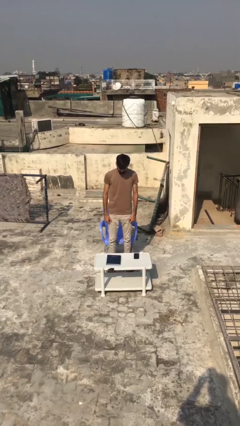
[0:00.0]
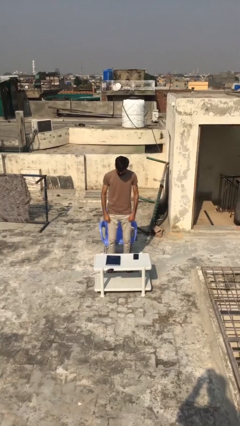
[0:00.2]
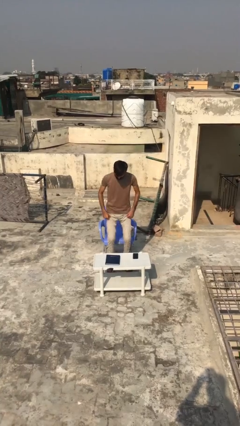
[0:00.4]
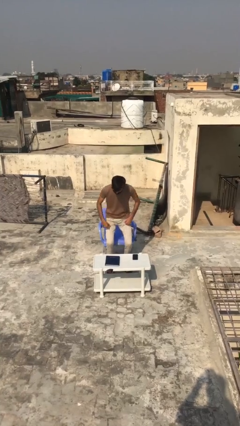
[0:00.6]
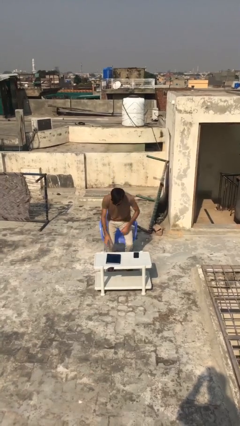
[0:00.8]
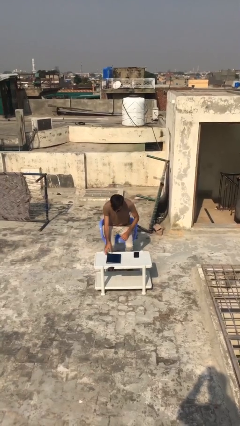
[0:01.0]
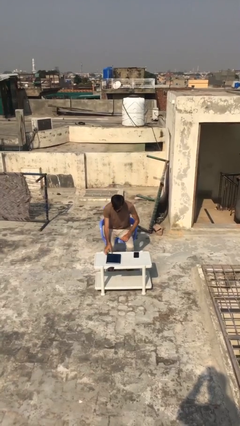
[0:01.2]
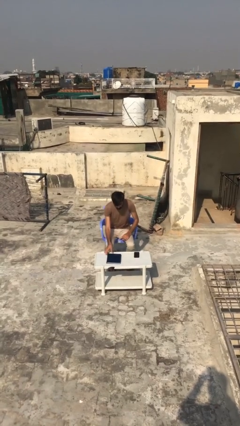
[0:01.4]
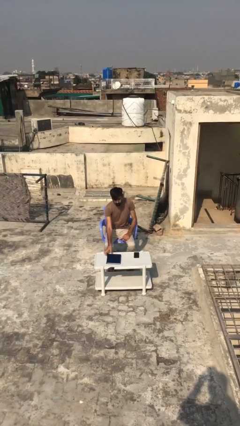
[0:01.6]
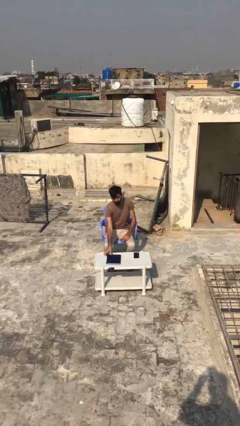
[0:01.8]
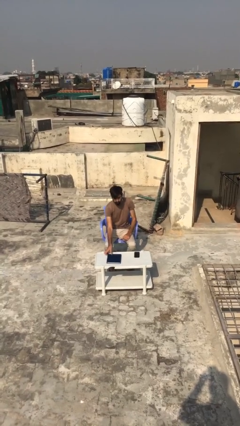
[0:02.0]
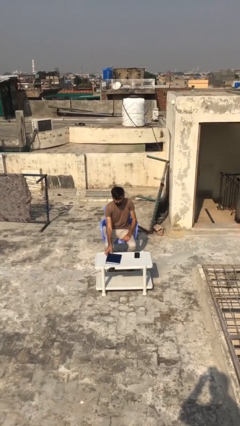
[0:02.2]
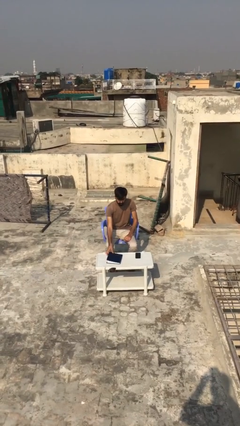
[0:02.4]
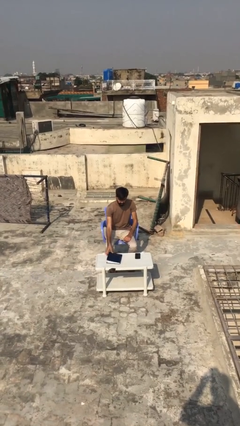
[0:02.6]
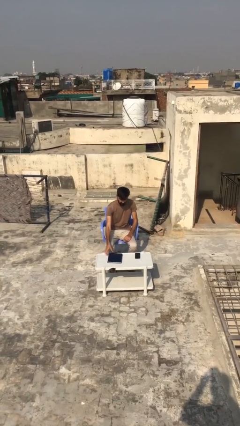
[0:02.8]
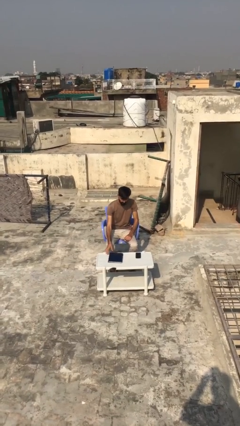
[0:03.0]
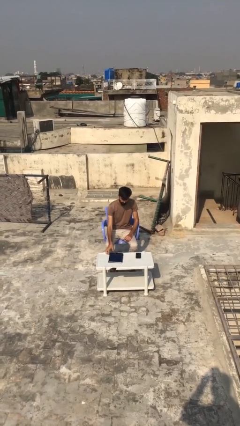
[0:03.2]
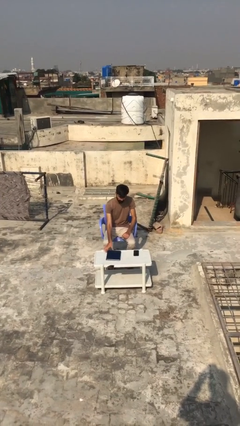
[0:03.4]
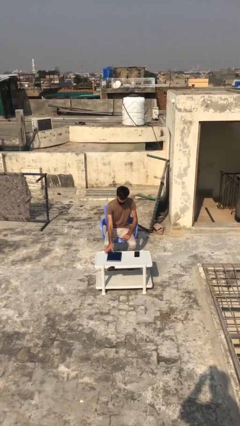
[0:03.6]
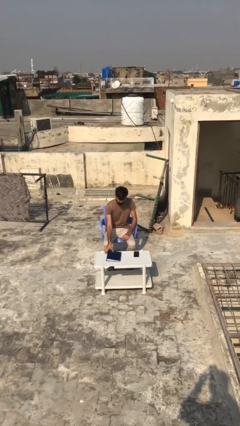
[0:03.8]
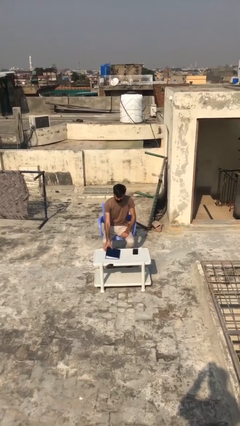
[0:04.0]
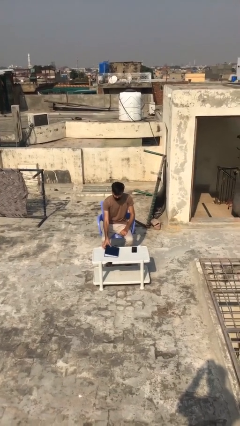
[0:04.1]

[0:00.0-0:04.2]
person sits down

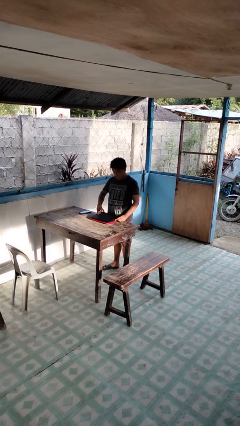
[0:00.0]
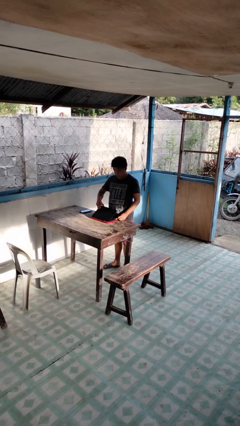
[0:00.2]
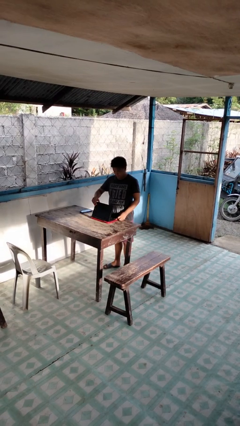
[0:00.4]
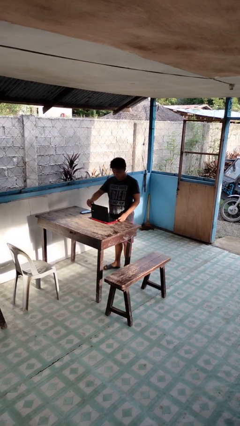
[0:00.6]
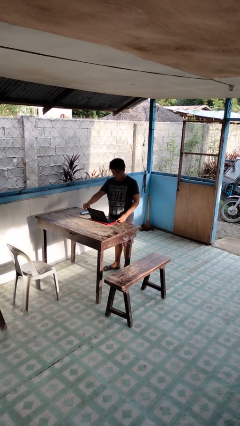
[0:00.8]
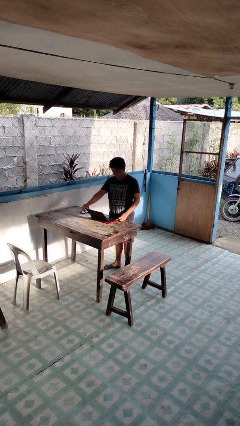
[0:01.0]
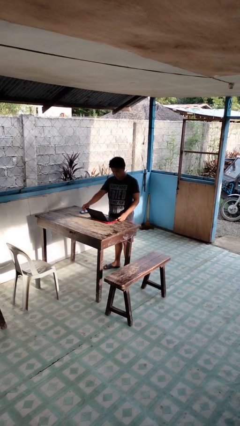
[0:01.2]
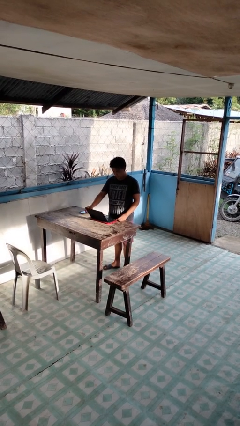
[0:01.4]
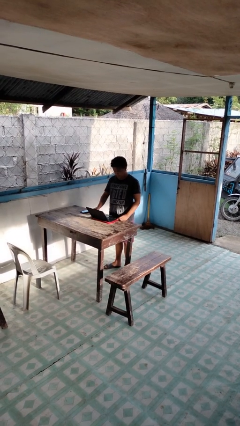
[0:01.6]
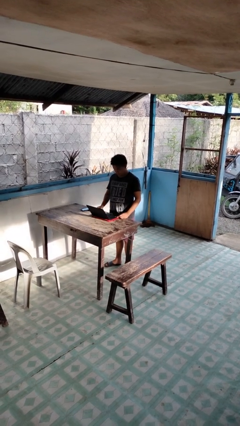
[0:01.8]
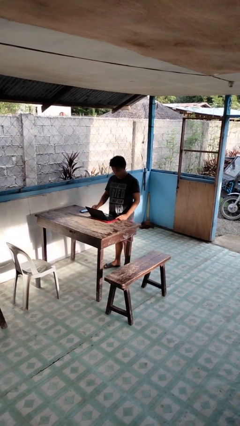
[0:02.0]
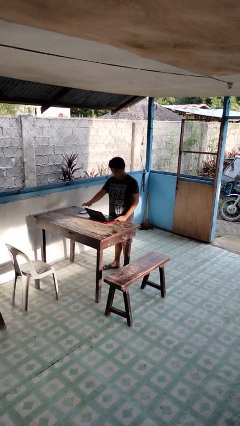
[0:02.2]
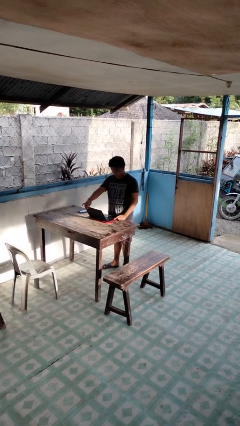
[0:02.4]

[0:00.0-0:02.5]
person opens laptop

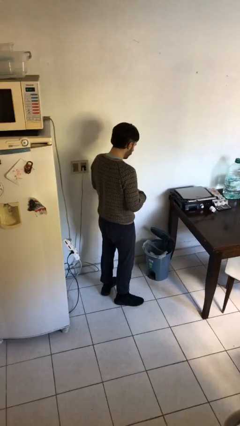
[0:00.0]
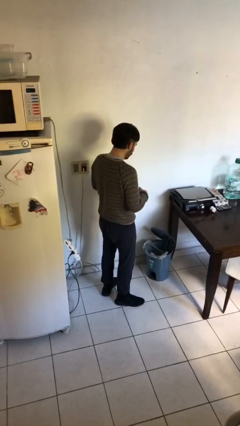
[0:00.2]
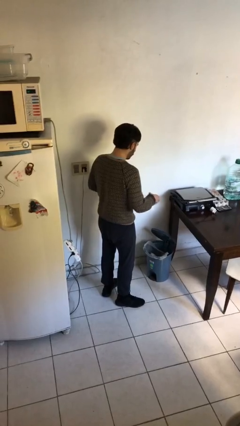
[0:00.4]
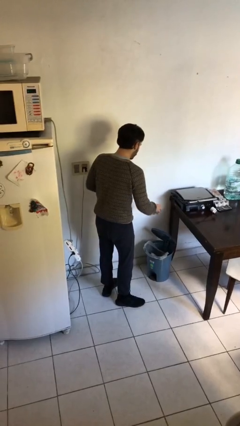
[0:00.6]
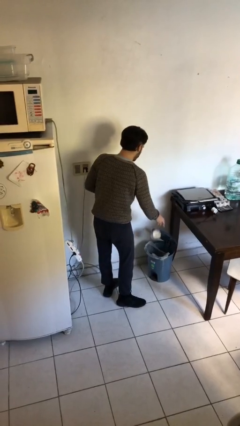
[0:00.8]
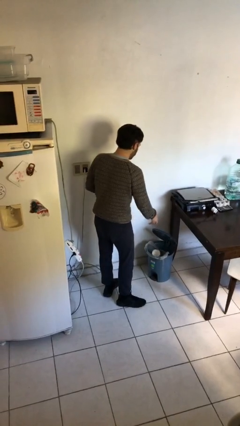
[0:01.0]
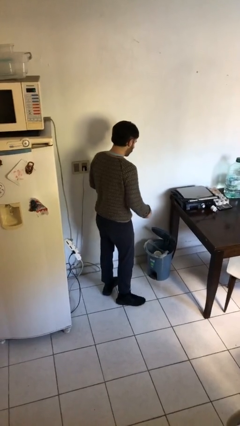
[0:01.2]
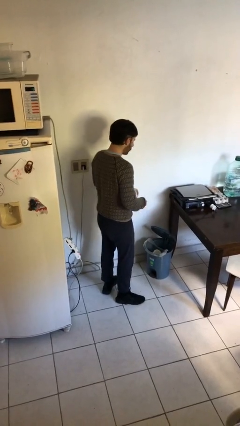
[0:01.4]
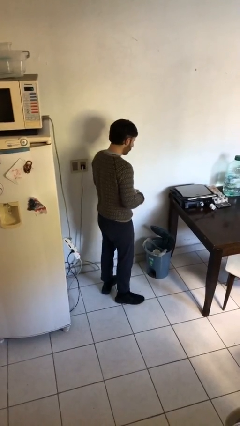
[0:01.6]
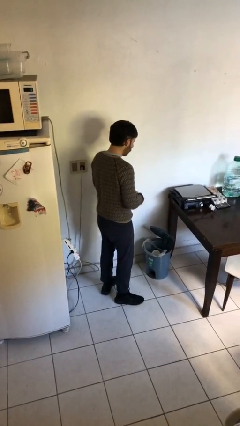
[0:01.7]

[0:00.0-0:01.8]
person discards trash

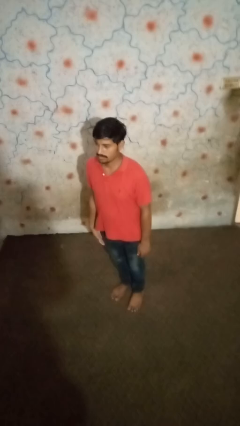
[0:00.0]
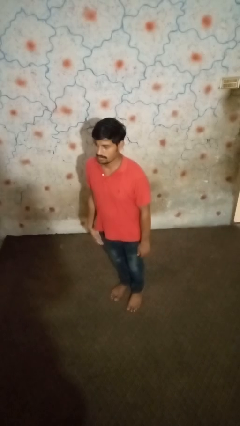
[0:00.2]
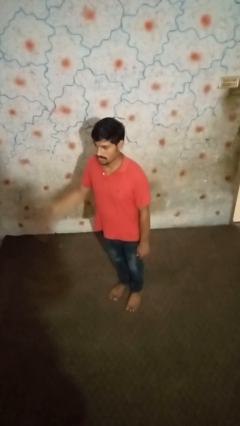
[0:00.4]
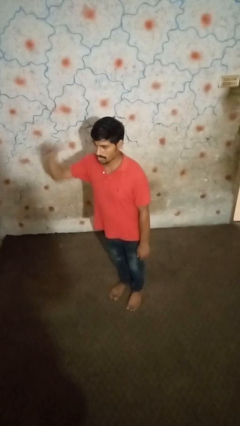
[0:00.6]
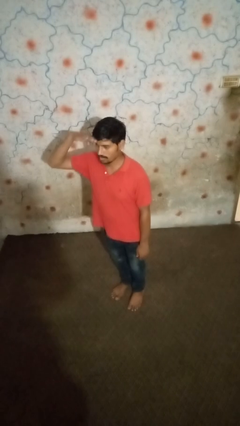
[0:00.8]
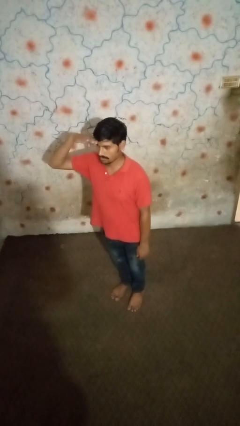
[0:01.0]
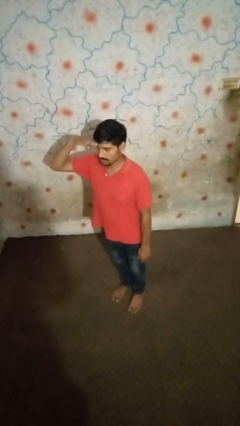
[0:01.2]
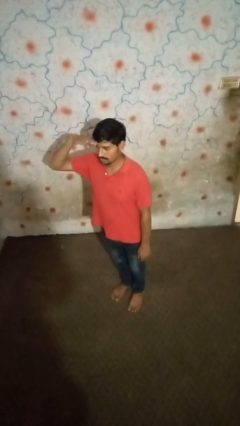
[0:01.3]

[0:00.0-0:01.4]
person salutes

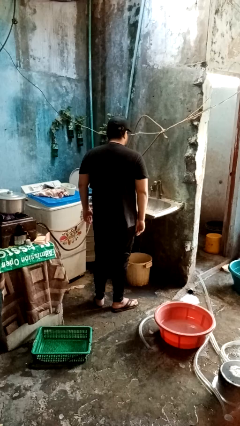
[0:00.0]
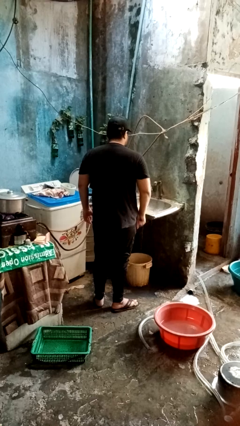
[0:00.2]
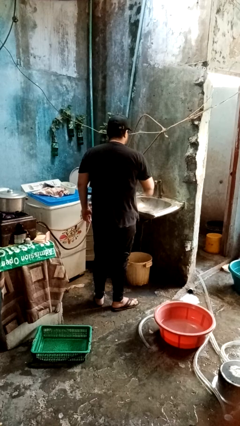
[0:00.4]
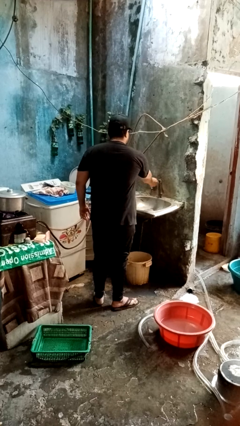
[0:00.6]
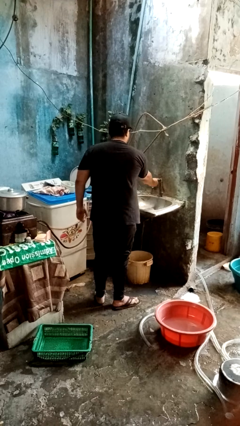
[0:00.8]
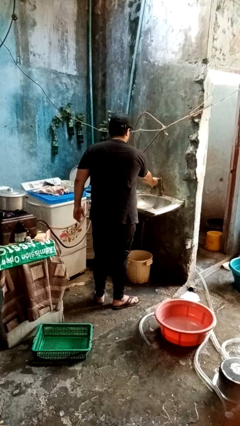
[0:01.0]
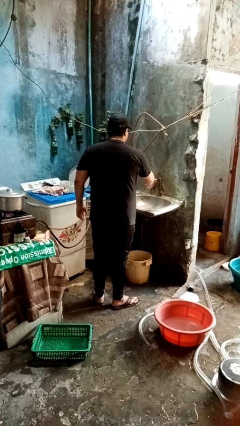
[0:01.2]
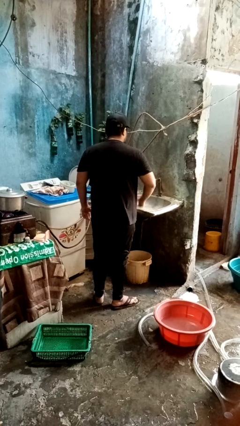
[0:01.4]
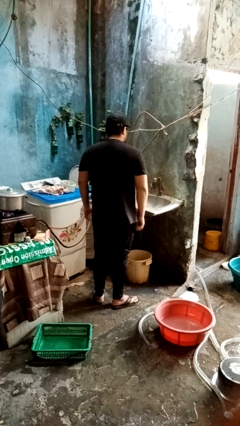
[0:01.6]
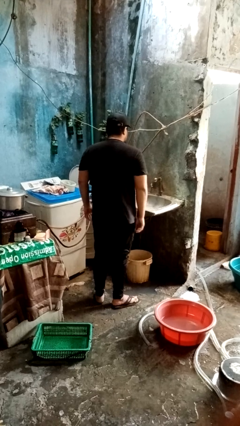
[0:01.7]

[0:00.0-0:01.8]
person turns off faucet

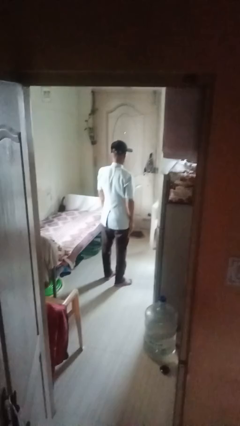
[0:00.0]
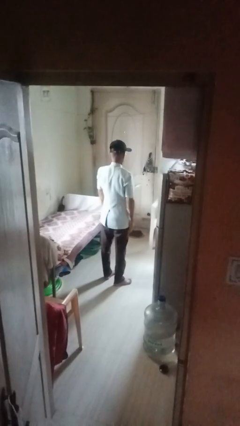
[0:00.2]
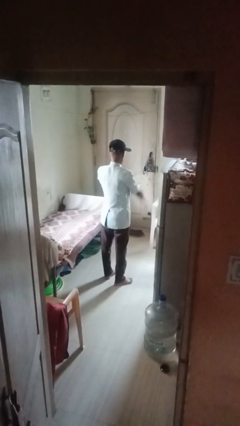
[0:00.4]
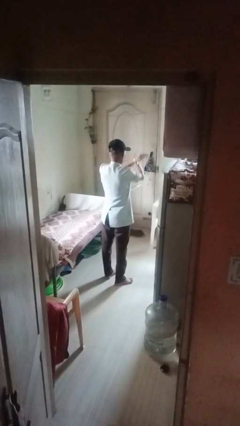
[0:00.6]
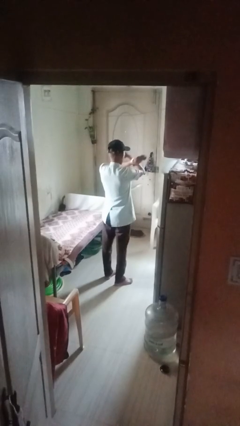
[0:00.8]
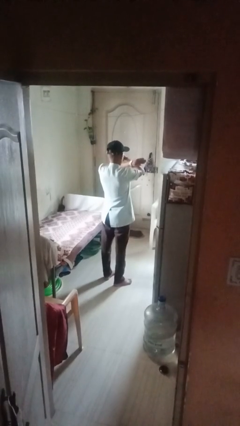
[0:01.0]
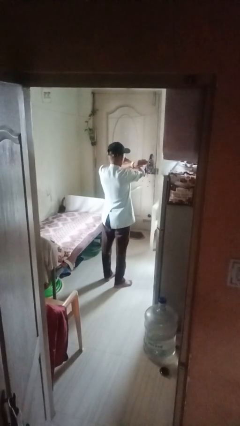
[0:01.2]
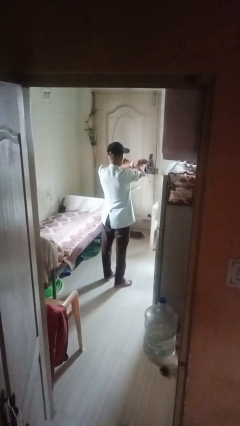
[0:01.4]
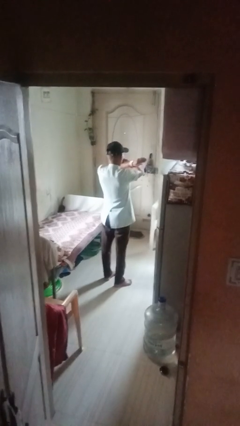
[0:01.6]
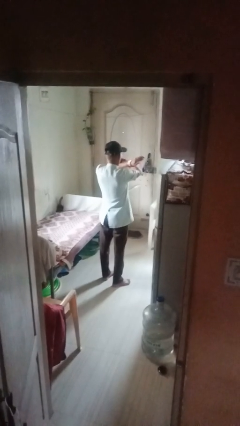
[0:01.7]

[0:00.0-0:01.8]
person gestures arms x

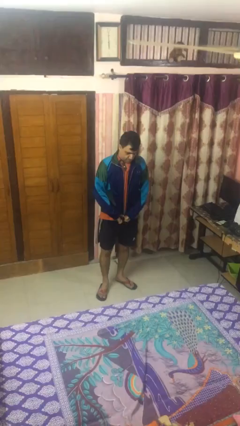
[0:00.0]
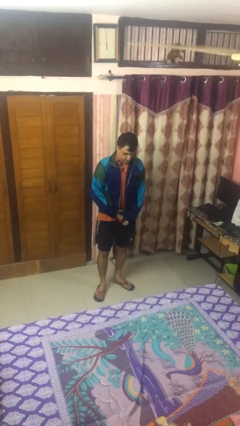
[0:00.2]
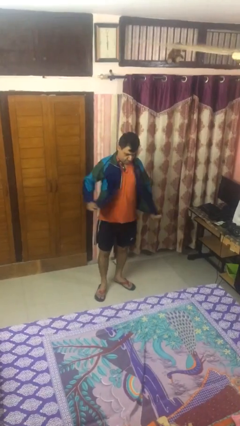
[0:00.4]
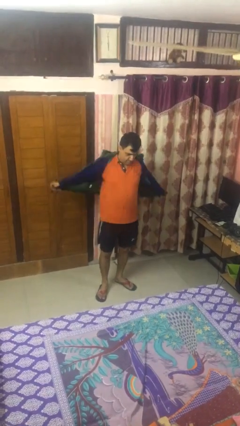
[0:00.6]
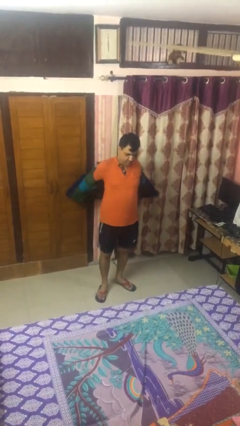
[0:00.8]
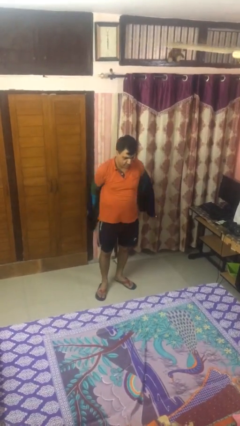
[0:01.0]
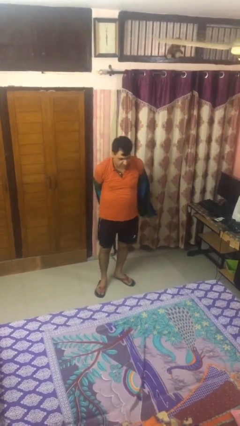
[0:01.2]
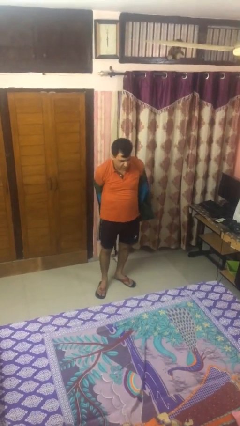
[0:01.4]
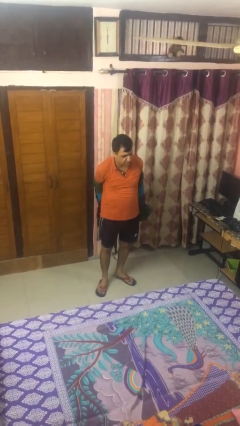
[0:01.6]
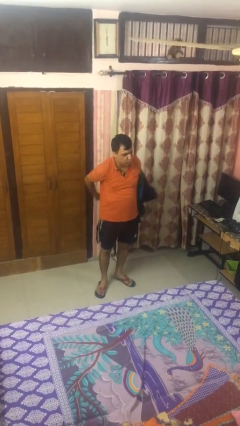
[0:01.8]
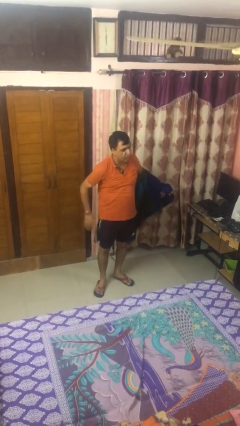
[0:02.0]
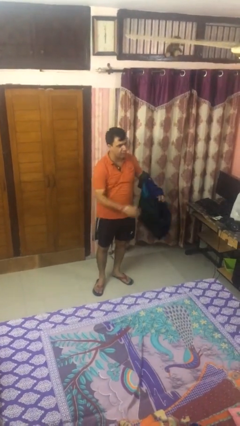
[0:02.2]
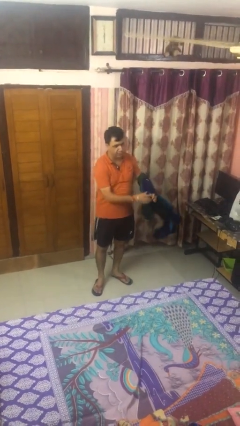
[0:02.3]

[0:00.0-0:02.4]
person takes off jacket

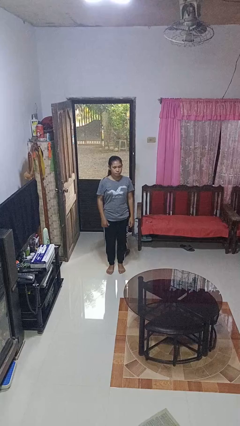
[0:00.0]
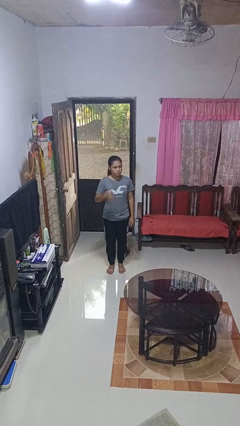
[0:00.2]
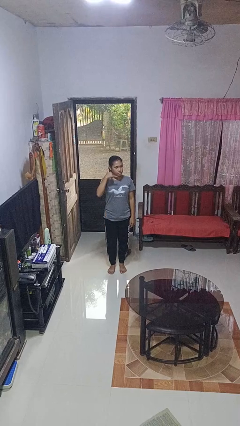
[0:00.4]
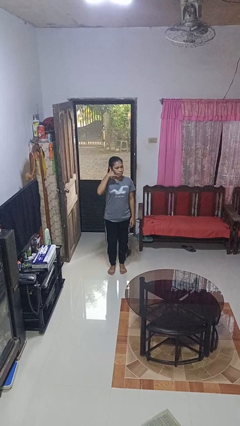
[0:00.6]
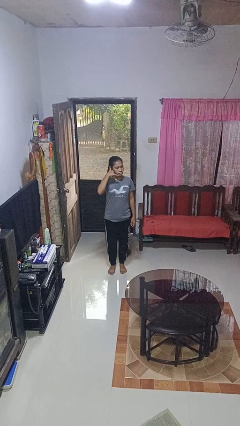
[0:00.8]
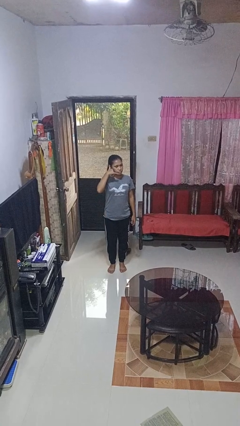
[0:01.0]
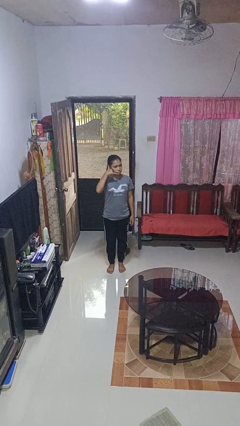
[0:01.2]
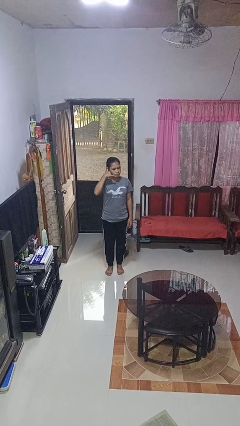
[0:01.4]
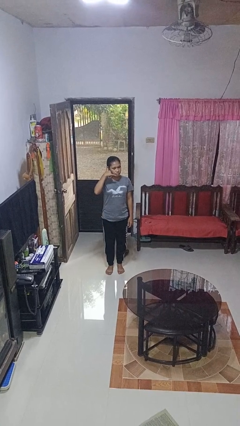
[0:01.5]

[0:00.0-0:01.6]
person gestures call me
